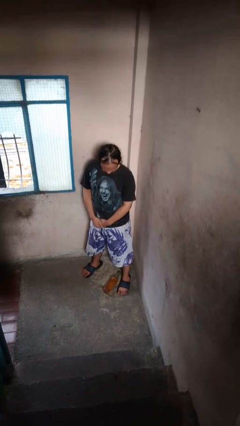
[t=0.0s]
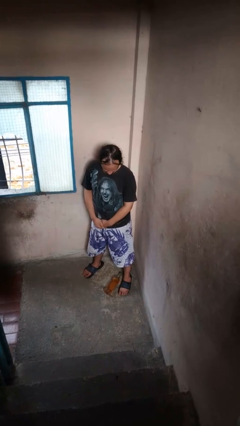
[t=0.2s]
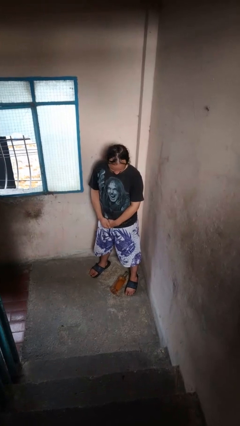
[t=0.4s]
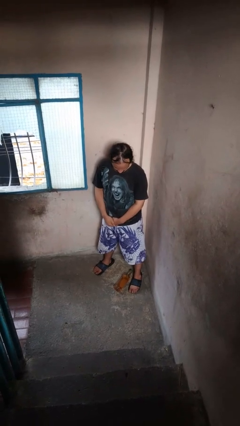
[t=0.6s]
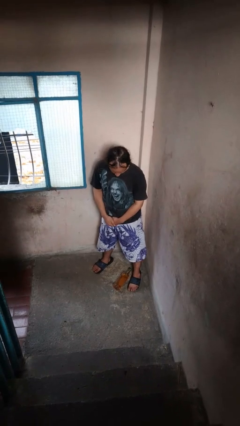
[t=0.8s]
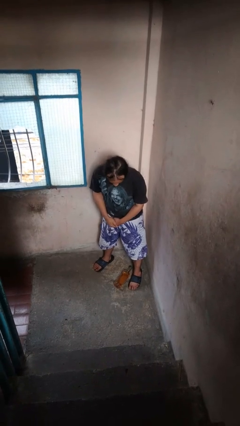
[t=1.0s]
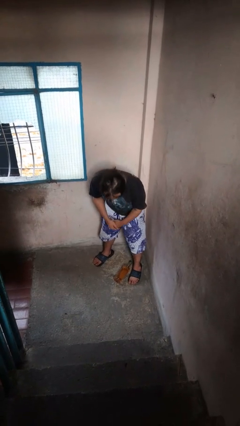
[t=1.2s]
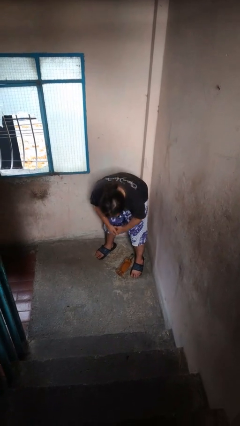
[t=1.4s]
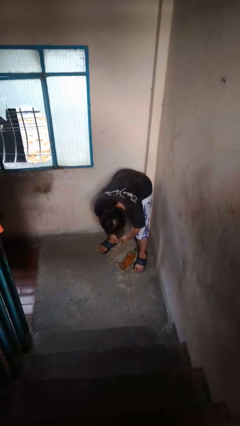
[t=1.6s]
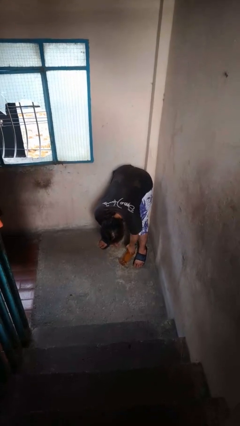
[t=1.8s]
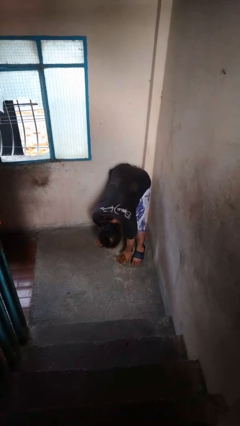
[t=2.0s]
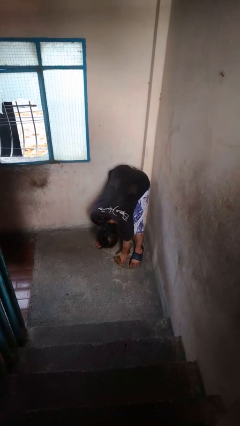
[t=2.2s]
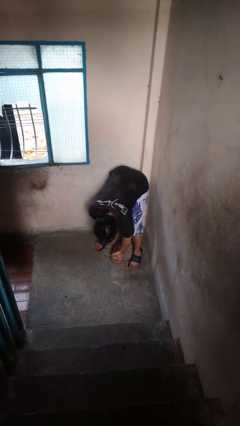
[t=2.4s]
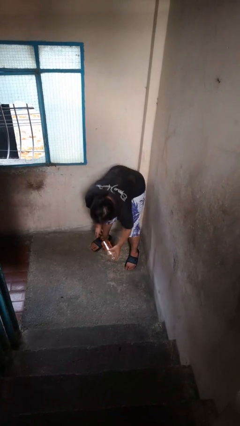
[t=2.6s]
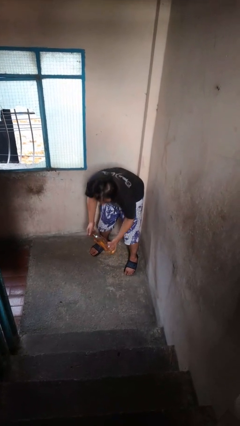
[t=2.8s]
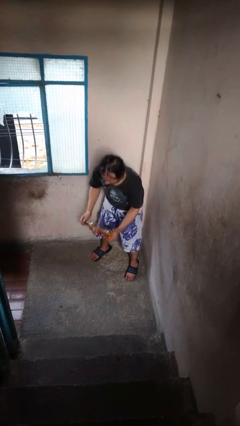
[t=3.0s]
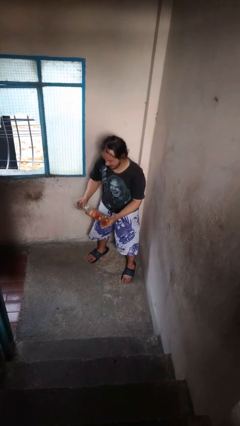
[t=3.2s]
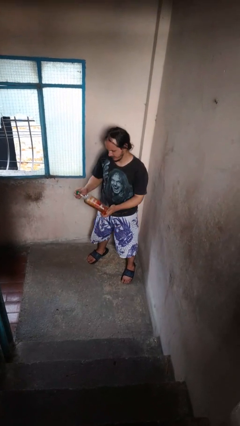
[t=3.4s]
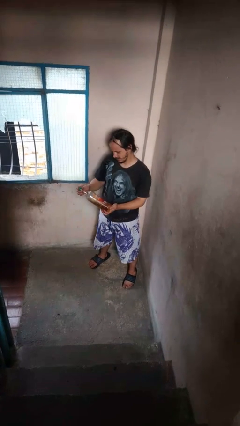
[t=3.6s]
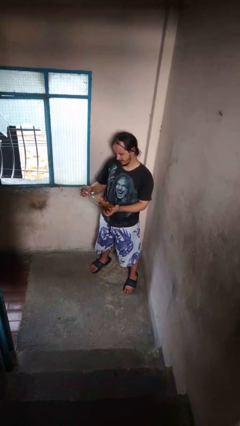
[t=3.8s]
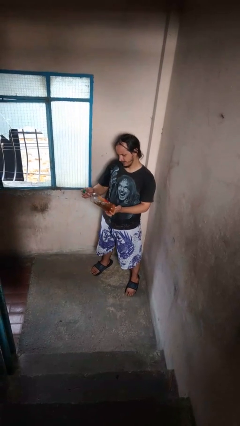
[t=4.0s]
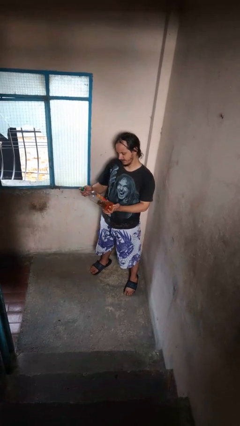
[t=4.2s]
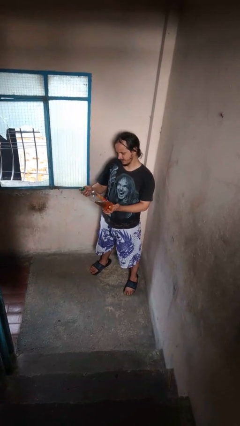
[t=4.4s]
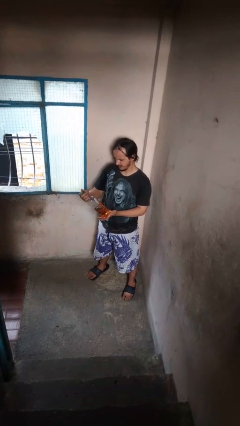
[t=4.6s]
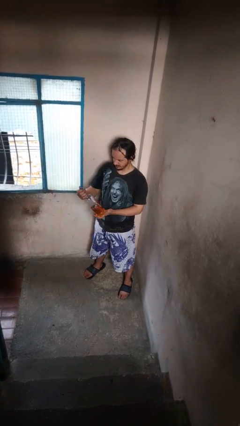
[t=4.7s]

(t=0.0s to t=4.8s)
person picks up object from floor

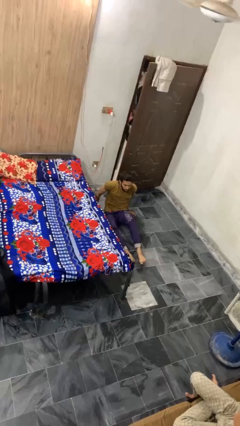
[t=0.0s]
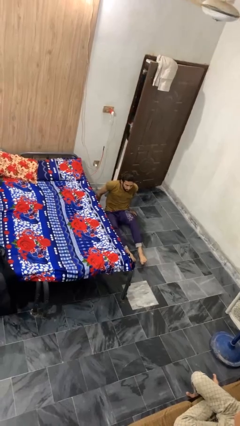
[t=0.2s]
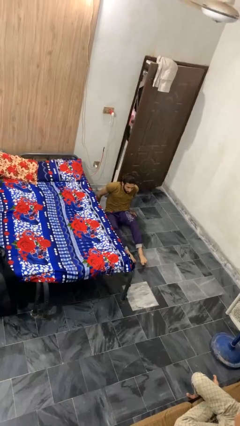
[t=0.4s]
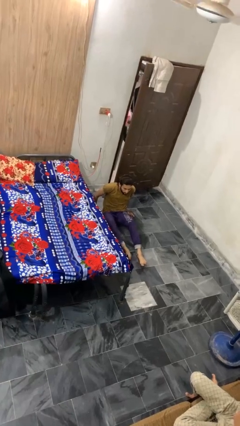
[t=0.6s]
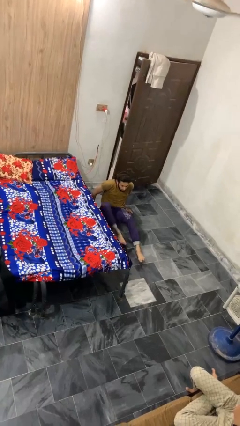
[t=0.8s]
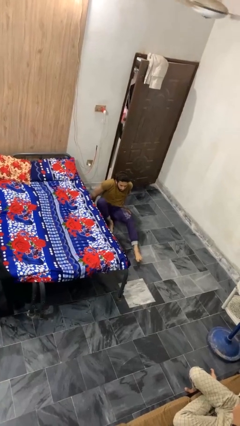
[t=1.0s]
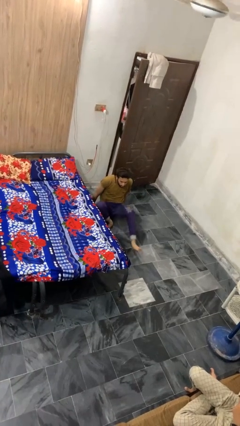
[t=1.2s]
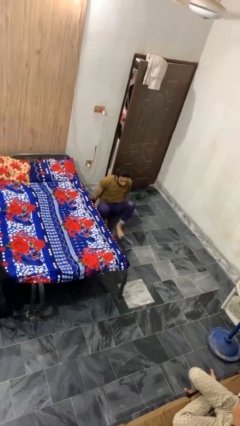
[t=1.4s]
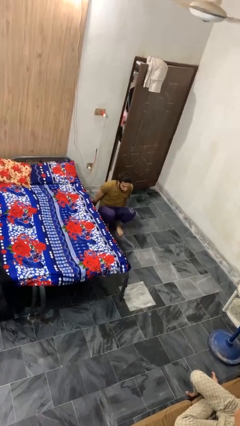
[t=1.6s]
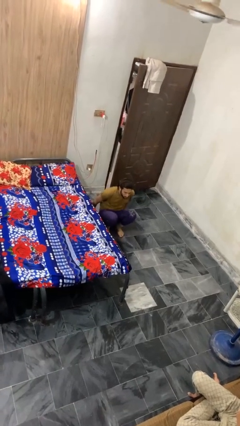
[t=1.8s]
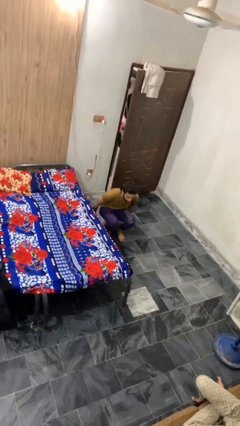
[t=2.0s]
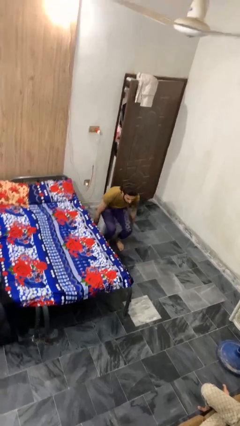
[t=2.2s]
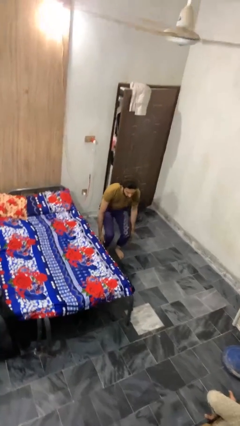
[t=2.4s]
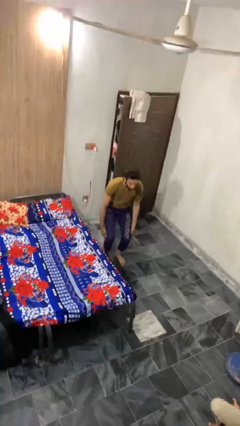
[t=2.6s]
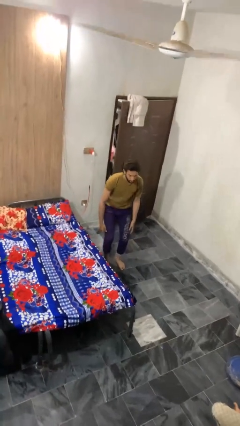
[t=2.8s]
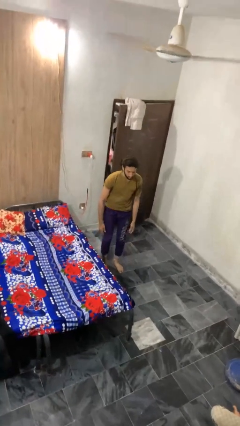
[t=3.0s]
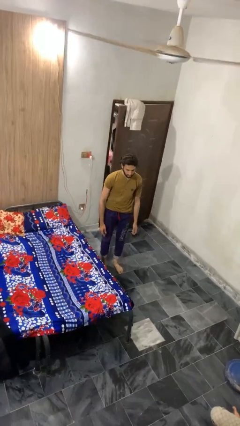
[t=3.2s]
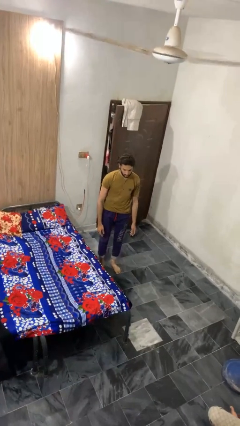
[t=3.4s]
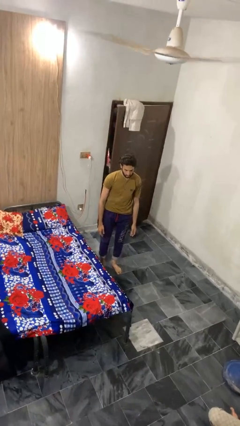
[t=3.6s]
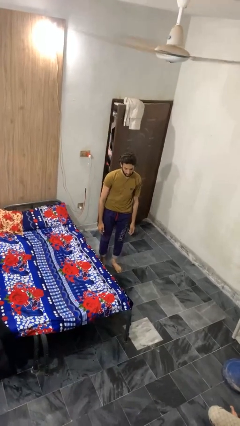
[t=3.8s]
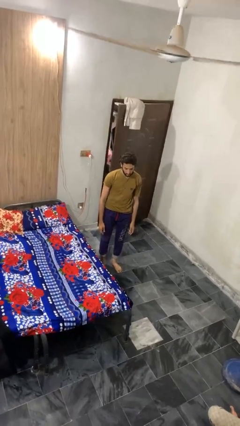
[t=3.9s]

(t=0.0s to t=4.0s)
person stands up from floor

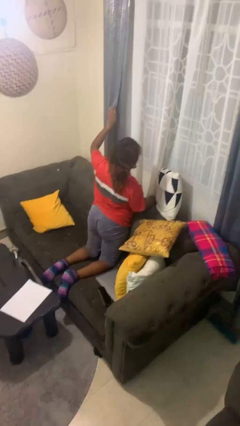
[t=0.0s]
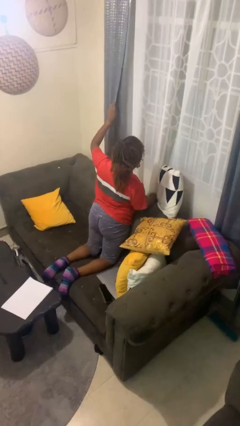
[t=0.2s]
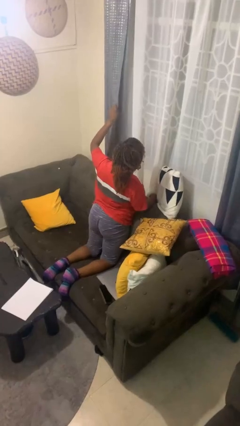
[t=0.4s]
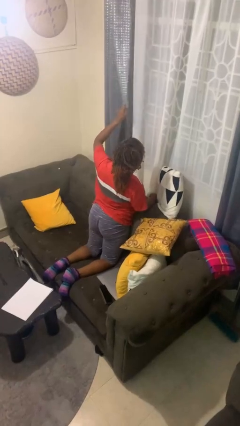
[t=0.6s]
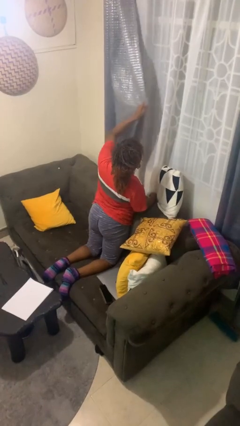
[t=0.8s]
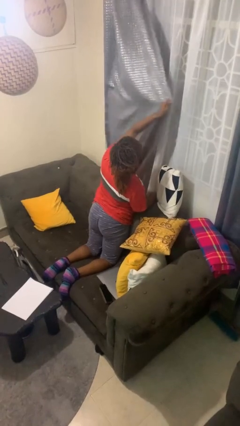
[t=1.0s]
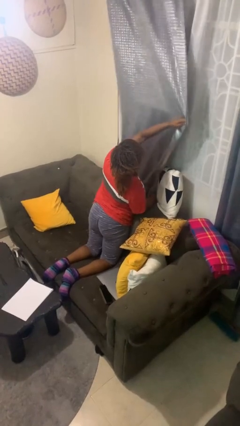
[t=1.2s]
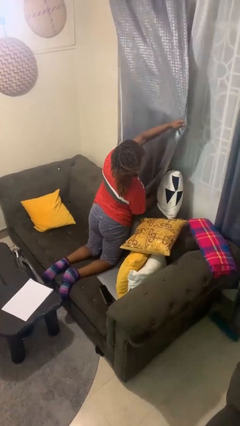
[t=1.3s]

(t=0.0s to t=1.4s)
person closes curtains

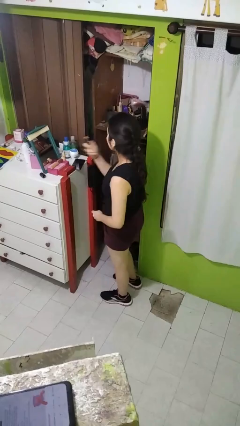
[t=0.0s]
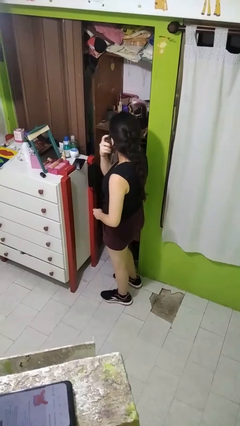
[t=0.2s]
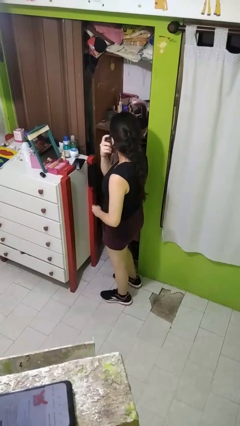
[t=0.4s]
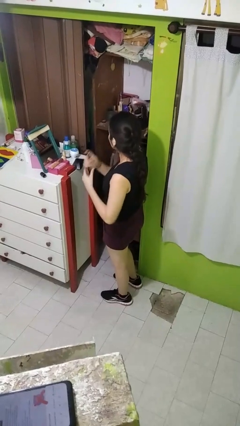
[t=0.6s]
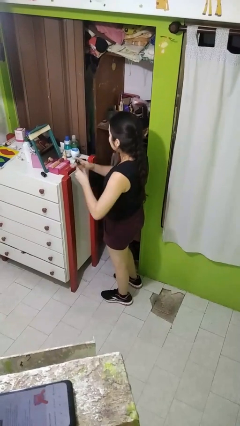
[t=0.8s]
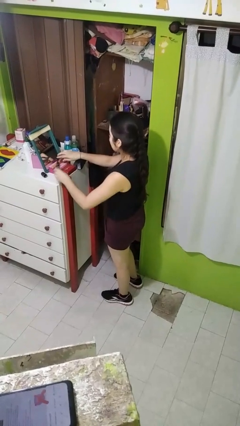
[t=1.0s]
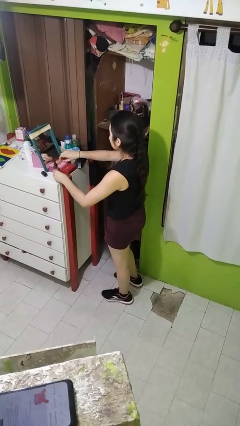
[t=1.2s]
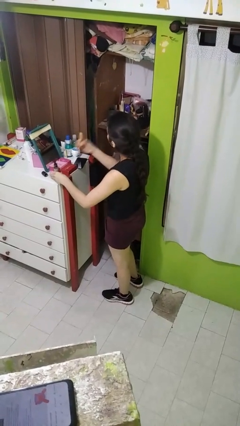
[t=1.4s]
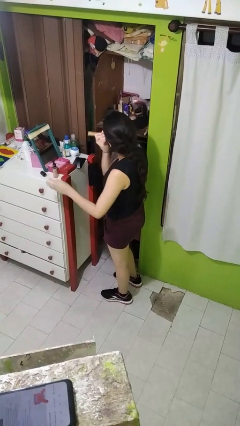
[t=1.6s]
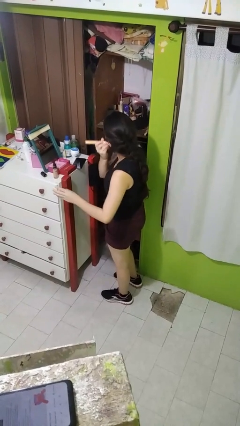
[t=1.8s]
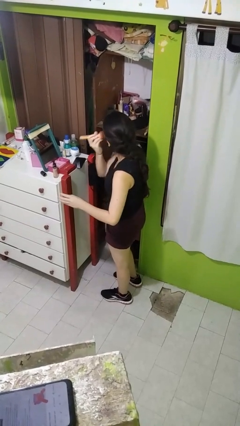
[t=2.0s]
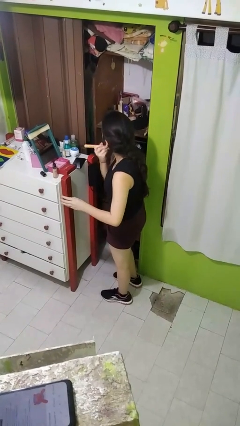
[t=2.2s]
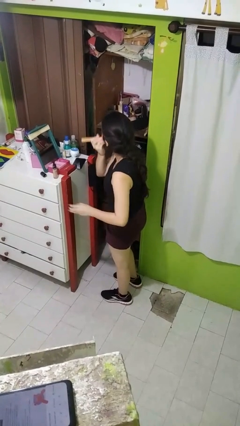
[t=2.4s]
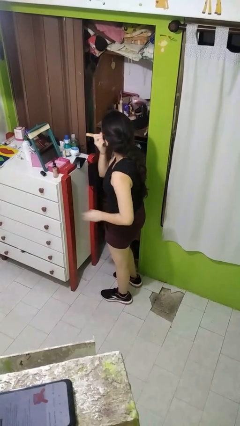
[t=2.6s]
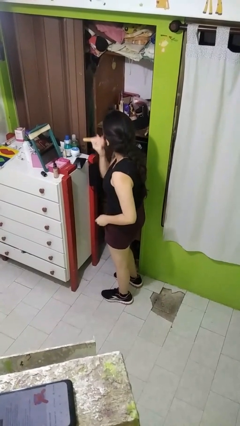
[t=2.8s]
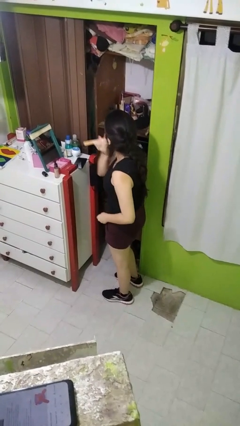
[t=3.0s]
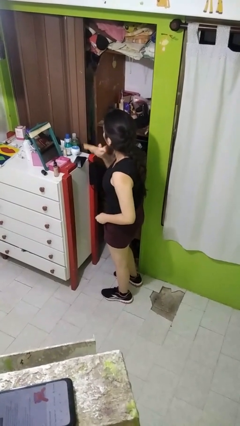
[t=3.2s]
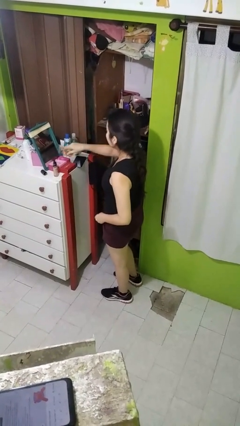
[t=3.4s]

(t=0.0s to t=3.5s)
person applies foundation makeup

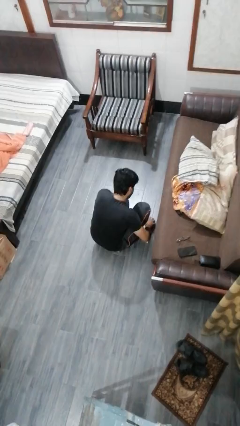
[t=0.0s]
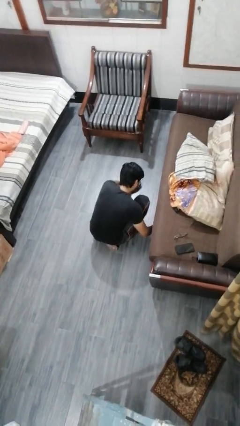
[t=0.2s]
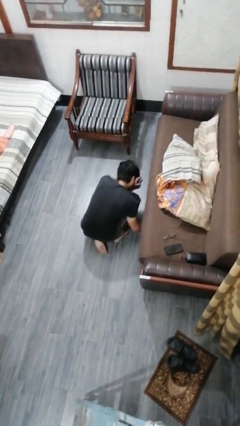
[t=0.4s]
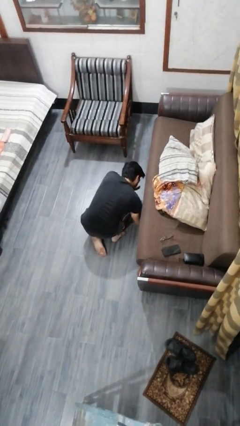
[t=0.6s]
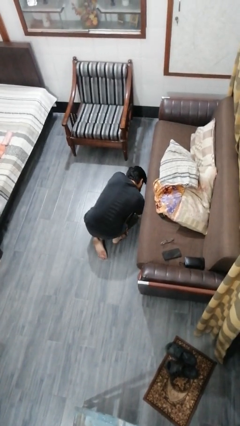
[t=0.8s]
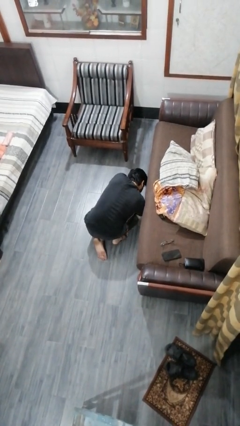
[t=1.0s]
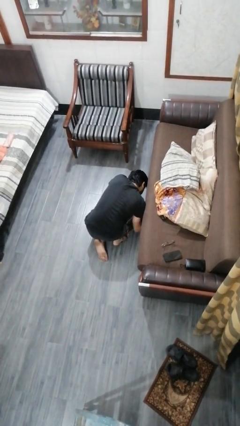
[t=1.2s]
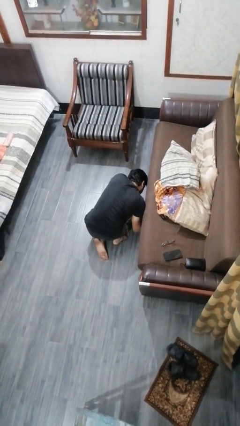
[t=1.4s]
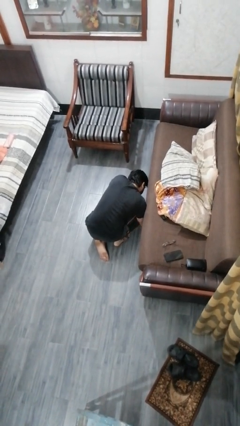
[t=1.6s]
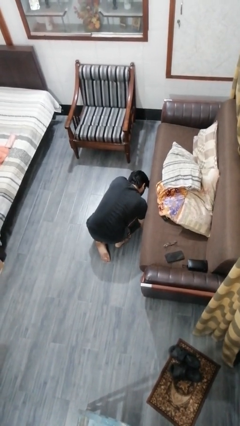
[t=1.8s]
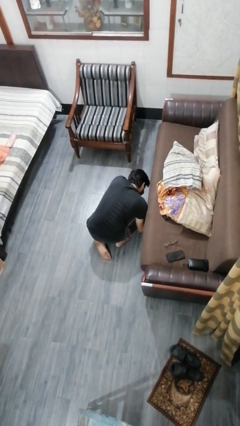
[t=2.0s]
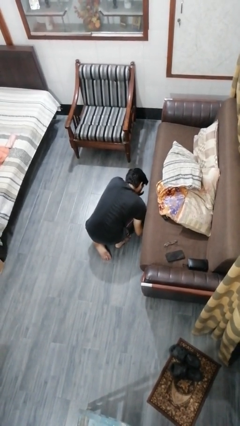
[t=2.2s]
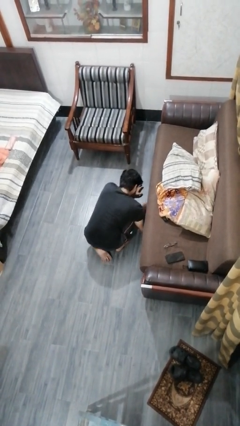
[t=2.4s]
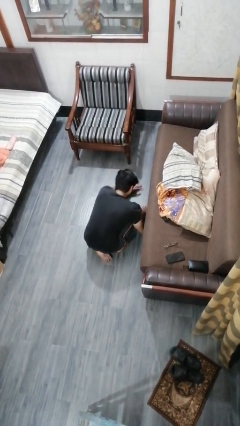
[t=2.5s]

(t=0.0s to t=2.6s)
person searches under couch

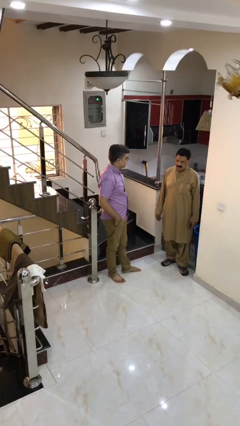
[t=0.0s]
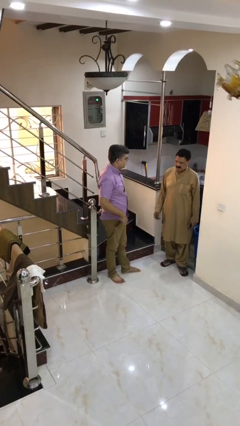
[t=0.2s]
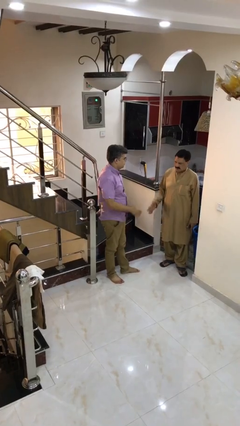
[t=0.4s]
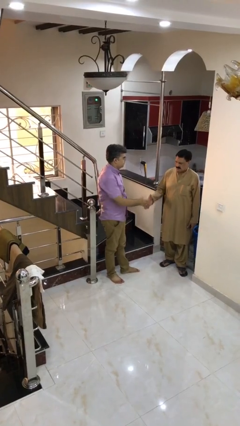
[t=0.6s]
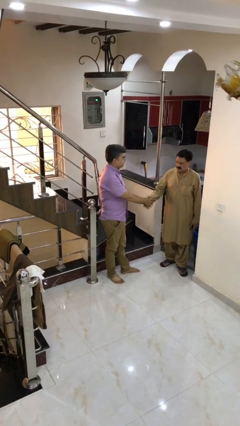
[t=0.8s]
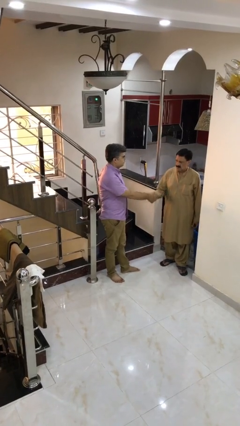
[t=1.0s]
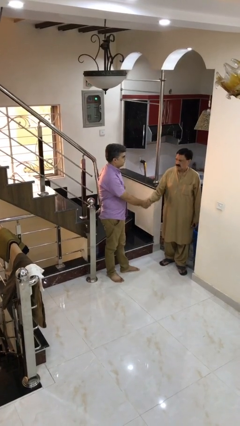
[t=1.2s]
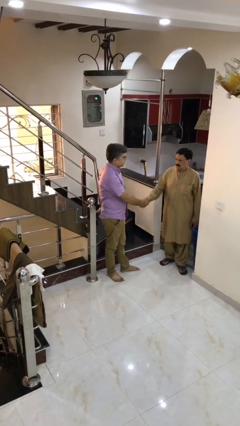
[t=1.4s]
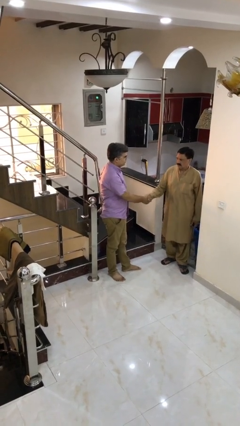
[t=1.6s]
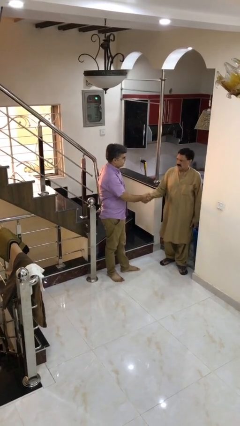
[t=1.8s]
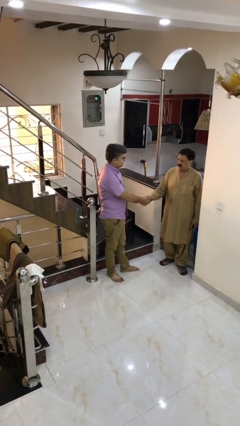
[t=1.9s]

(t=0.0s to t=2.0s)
person shakes hand
